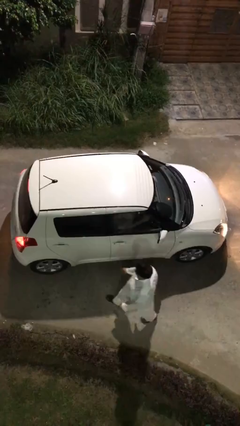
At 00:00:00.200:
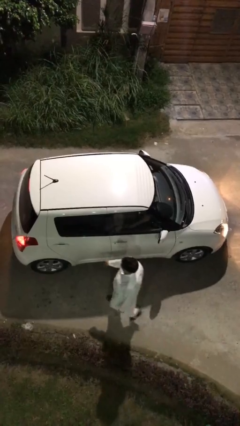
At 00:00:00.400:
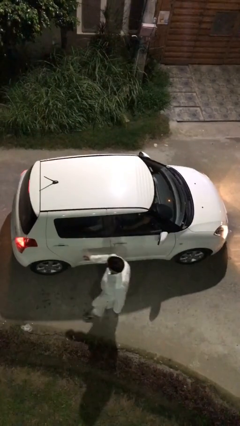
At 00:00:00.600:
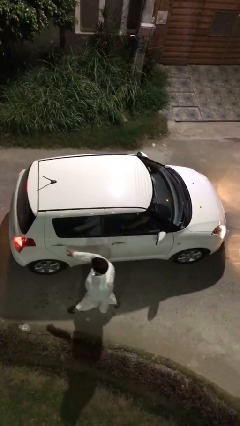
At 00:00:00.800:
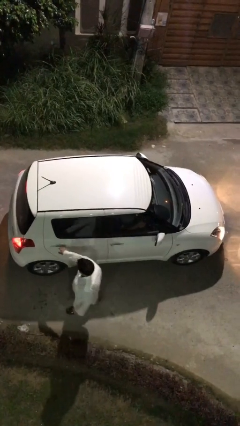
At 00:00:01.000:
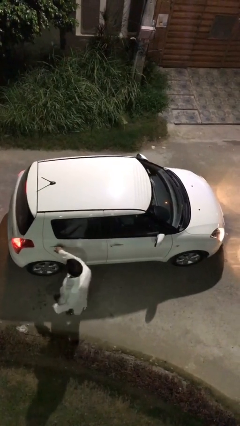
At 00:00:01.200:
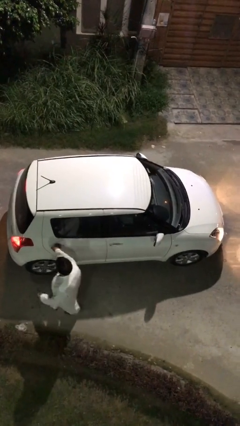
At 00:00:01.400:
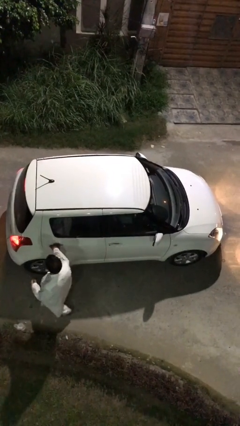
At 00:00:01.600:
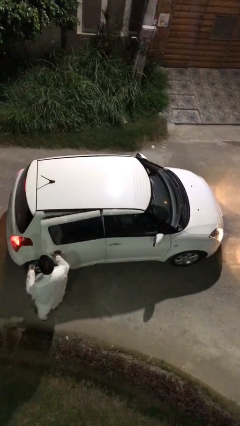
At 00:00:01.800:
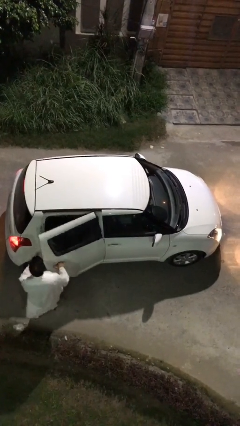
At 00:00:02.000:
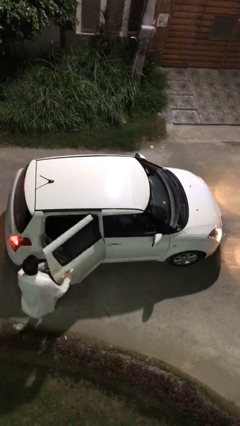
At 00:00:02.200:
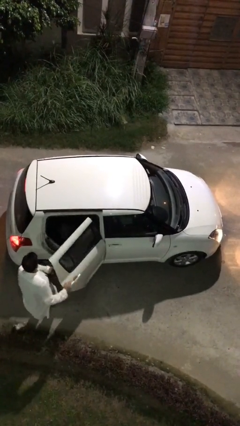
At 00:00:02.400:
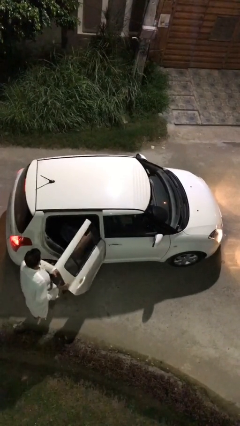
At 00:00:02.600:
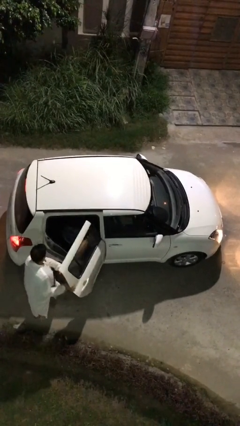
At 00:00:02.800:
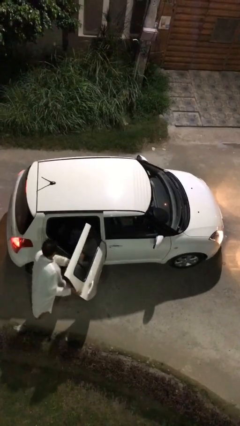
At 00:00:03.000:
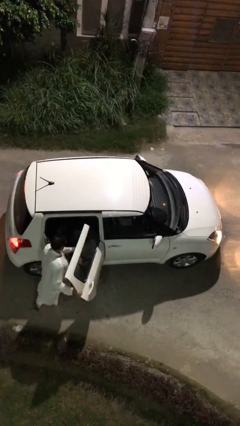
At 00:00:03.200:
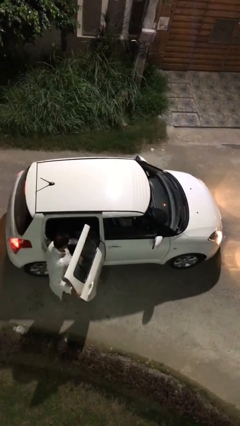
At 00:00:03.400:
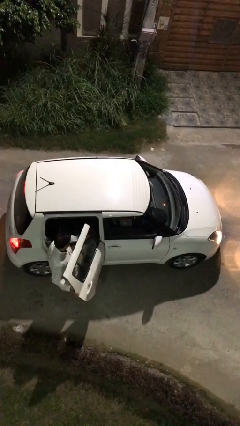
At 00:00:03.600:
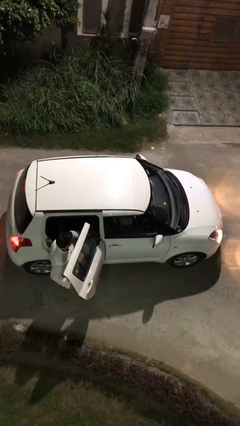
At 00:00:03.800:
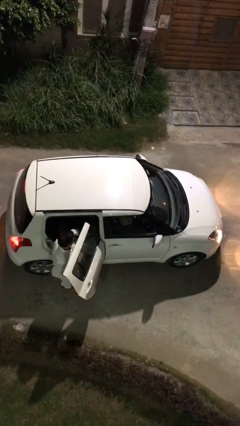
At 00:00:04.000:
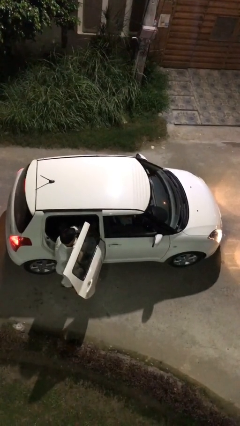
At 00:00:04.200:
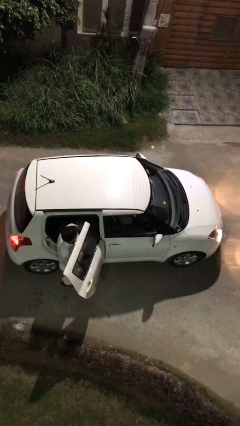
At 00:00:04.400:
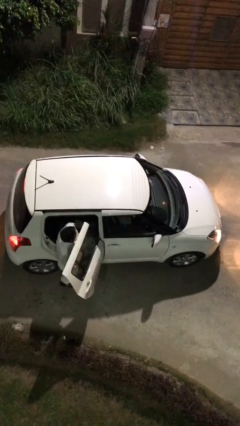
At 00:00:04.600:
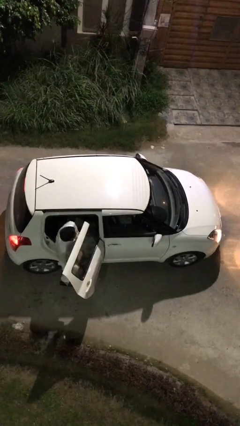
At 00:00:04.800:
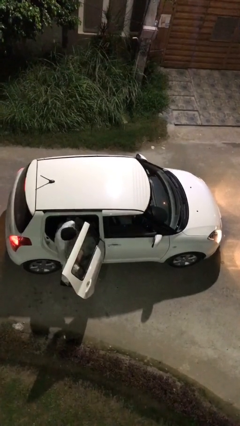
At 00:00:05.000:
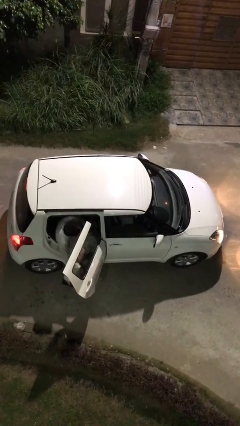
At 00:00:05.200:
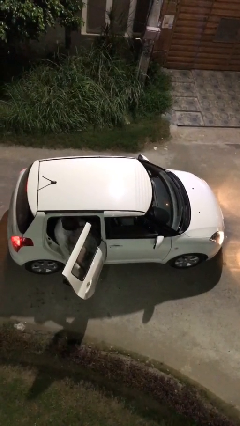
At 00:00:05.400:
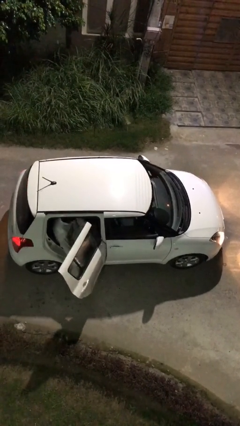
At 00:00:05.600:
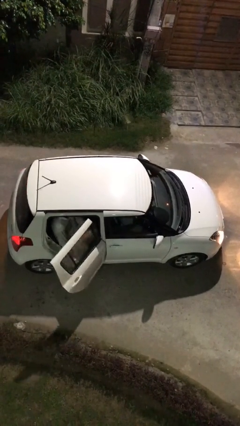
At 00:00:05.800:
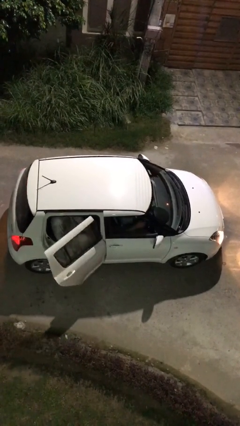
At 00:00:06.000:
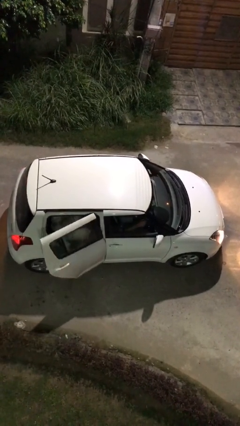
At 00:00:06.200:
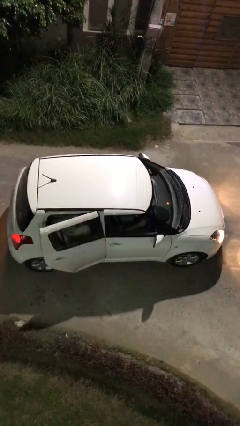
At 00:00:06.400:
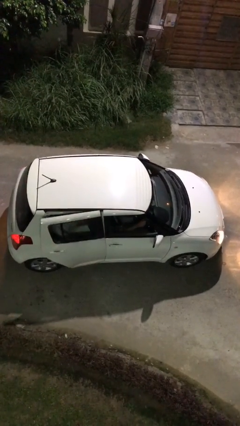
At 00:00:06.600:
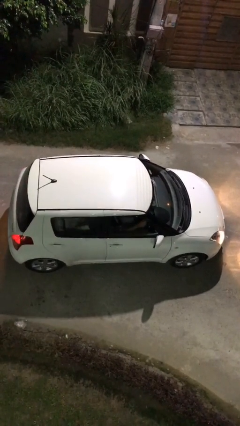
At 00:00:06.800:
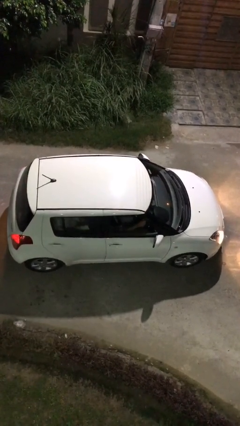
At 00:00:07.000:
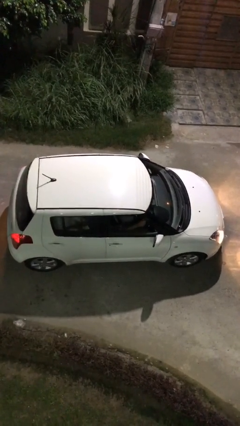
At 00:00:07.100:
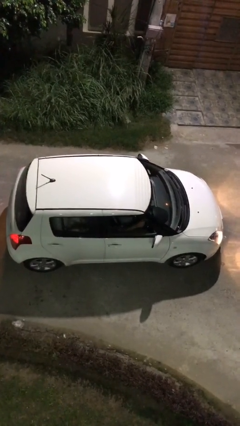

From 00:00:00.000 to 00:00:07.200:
car picks up person

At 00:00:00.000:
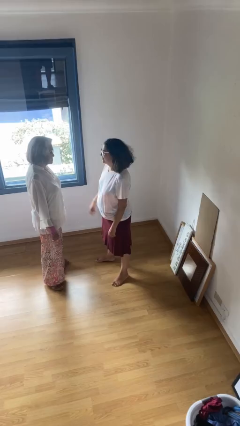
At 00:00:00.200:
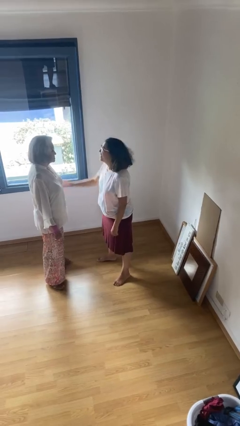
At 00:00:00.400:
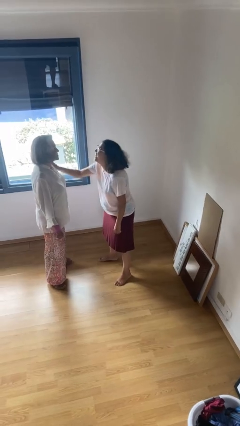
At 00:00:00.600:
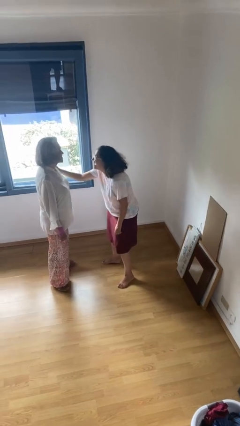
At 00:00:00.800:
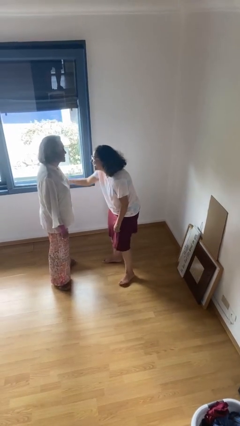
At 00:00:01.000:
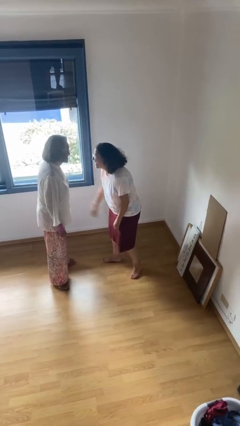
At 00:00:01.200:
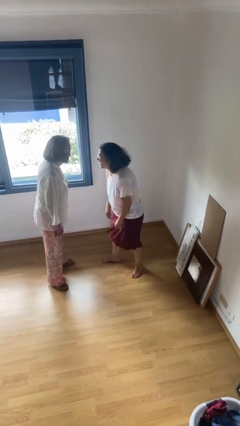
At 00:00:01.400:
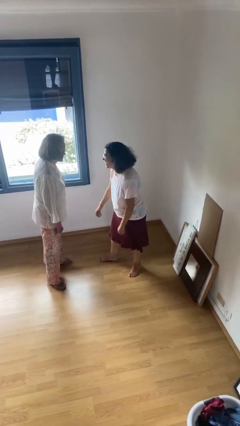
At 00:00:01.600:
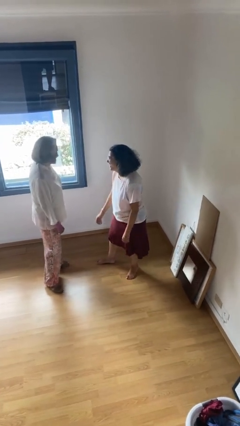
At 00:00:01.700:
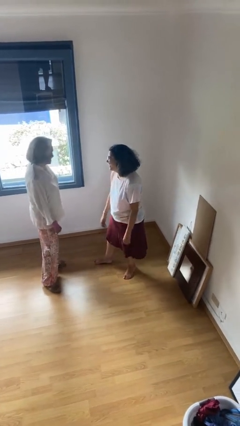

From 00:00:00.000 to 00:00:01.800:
person shoves person

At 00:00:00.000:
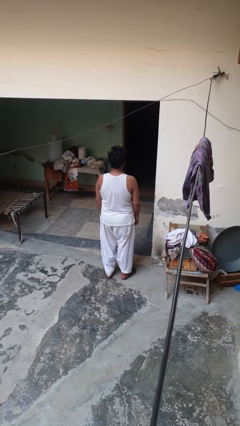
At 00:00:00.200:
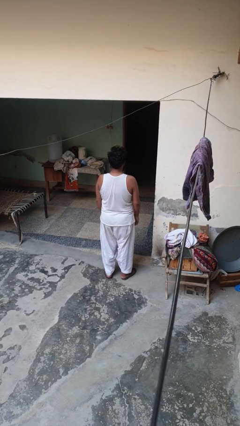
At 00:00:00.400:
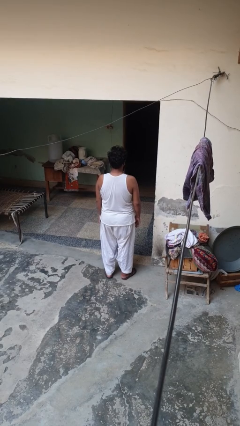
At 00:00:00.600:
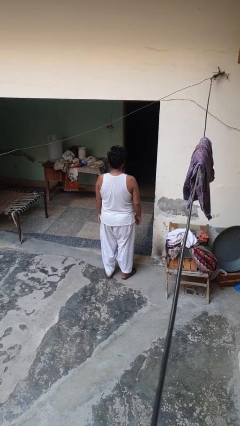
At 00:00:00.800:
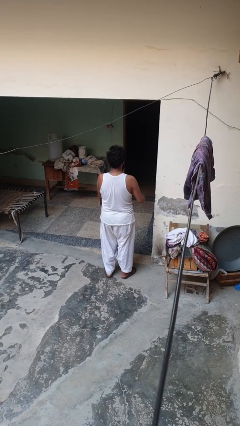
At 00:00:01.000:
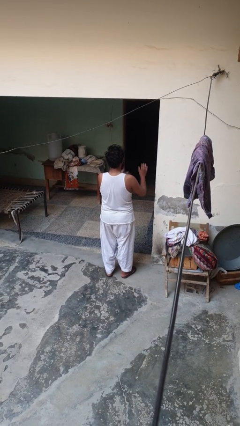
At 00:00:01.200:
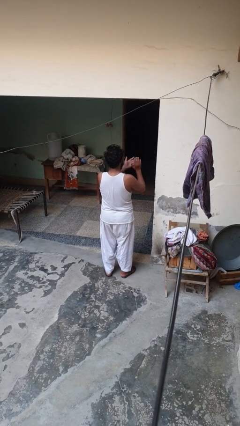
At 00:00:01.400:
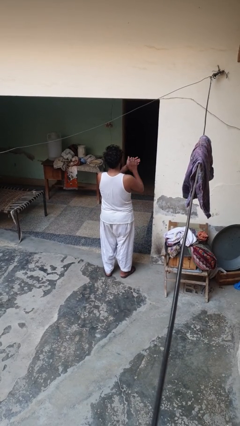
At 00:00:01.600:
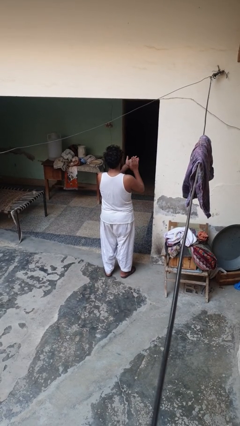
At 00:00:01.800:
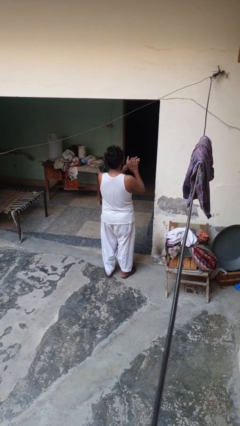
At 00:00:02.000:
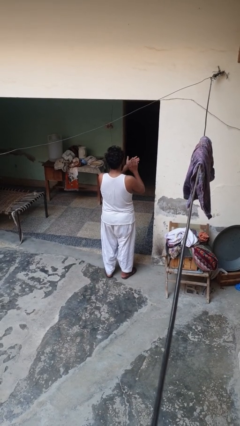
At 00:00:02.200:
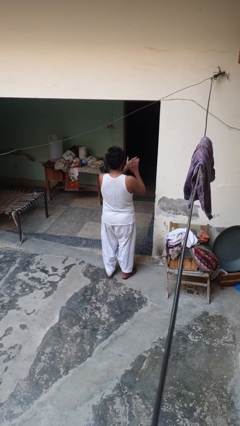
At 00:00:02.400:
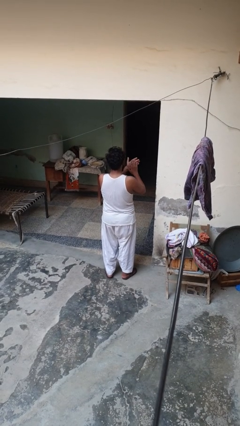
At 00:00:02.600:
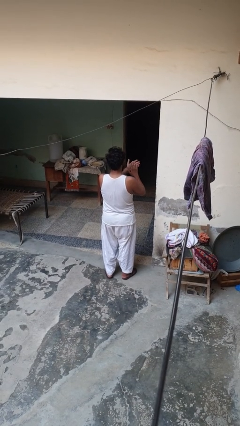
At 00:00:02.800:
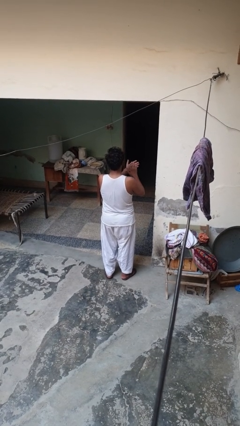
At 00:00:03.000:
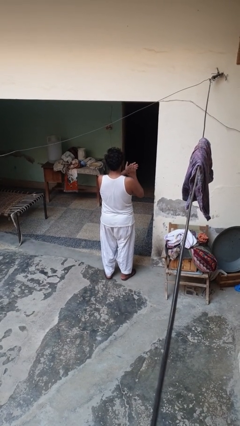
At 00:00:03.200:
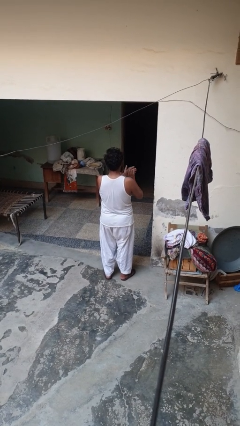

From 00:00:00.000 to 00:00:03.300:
person claps hands

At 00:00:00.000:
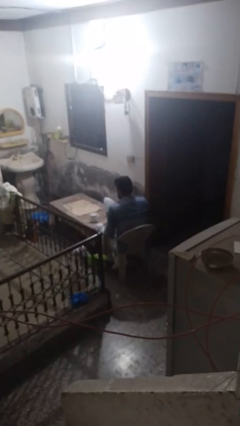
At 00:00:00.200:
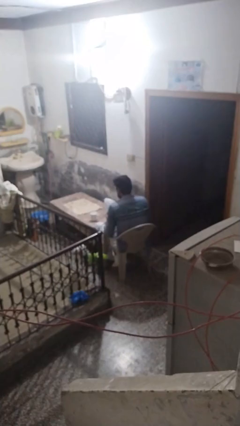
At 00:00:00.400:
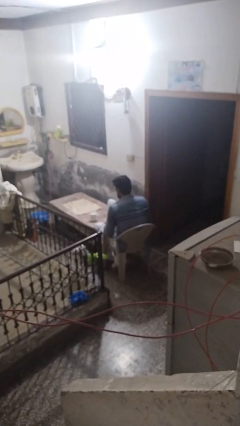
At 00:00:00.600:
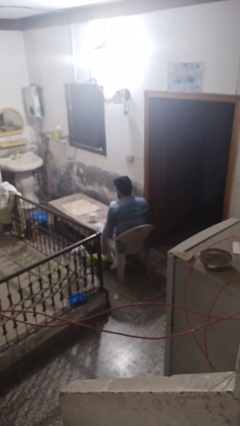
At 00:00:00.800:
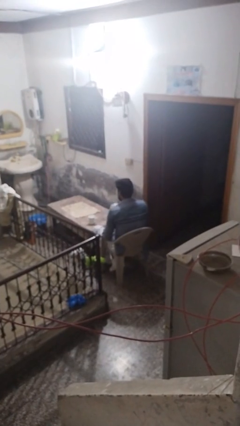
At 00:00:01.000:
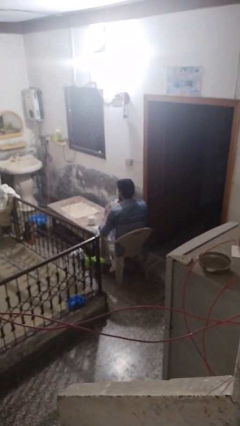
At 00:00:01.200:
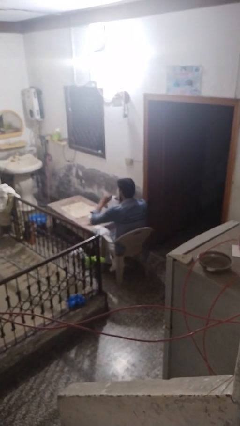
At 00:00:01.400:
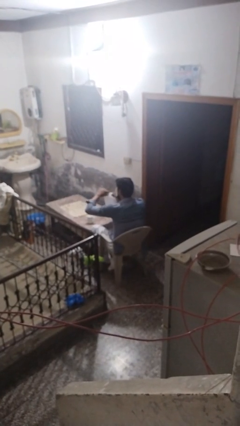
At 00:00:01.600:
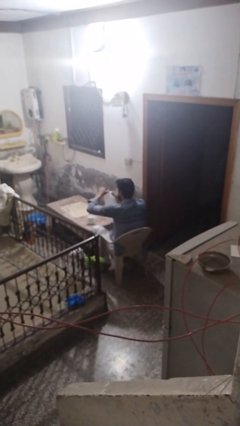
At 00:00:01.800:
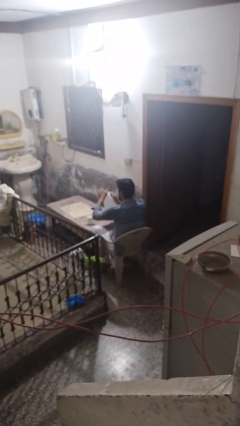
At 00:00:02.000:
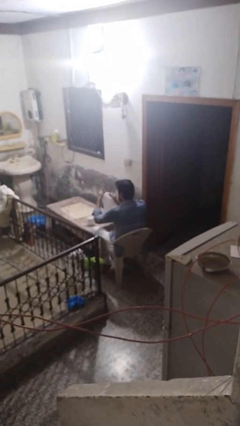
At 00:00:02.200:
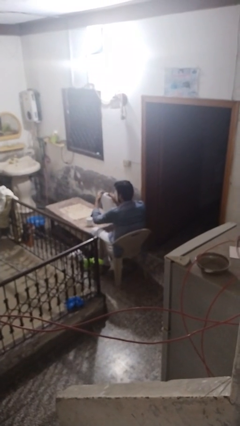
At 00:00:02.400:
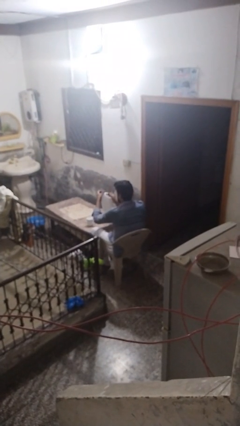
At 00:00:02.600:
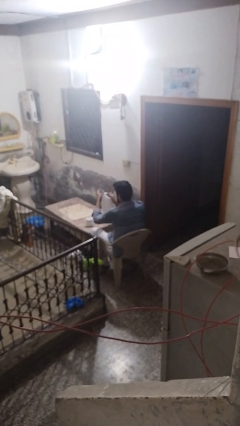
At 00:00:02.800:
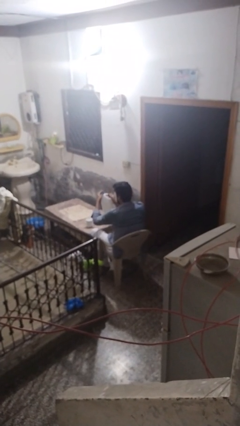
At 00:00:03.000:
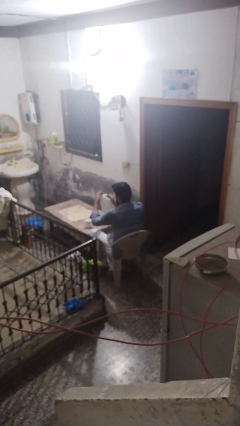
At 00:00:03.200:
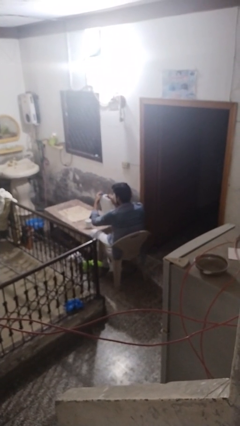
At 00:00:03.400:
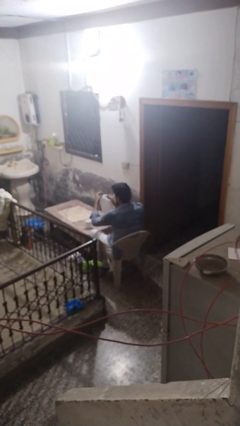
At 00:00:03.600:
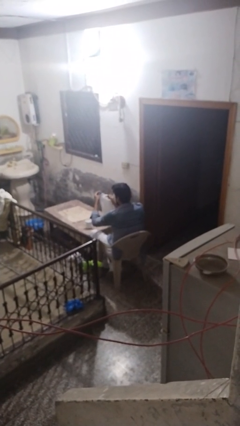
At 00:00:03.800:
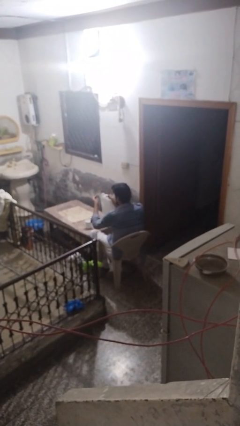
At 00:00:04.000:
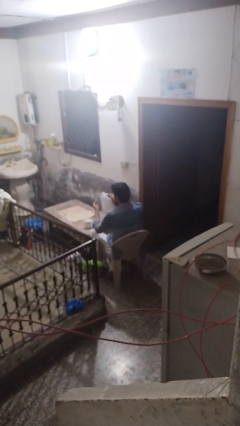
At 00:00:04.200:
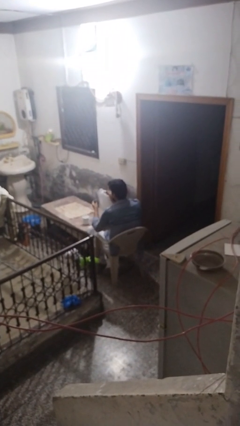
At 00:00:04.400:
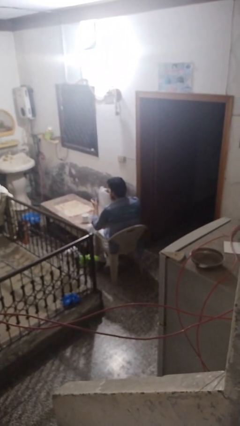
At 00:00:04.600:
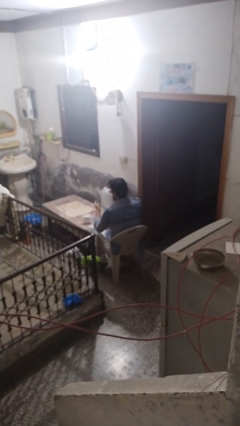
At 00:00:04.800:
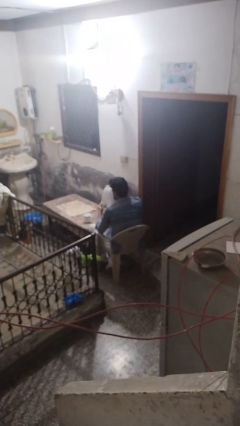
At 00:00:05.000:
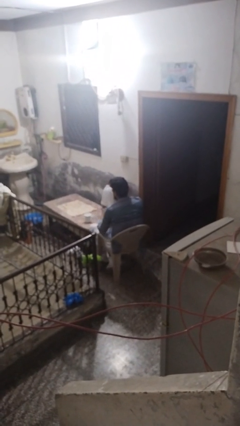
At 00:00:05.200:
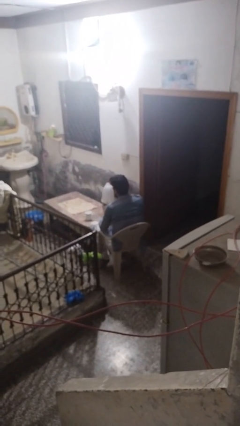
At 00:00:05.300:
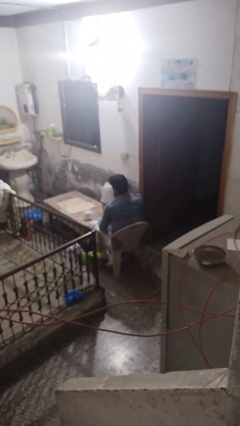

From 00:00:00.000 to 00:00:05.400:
person unscrews lid from bottle
